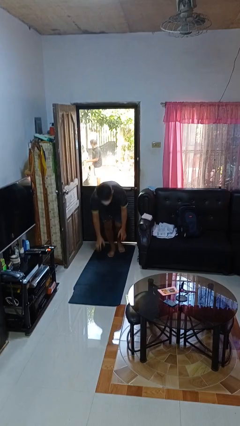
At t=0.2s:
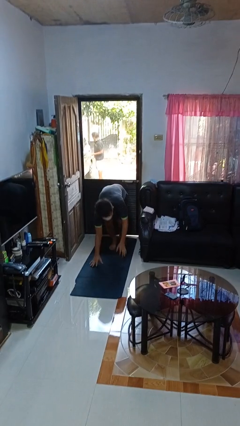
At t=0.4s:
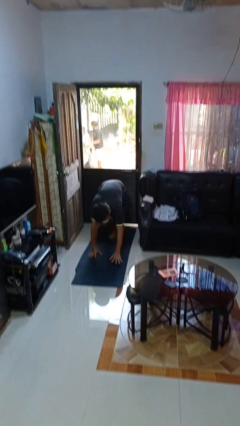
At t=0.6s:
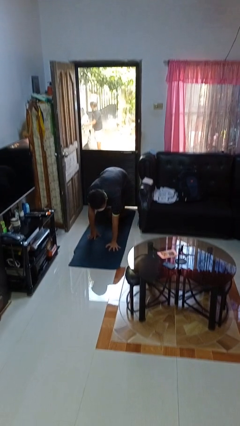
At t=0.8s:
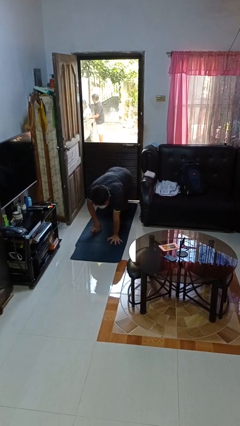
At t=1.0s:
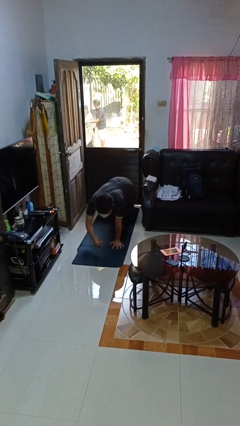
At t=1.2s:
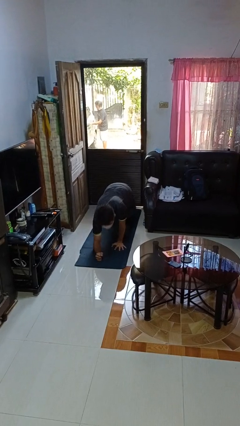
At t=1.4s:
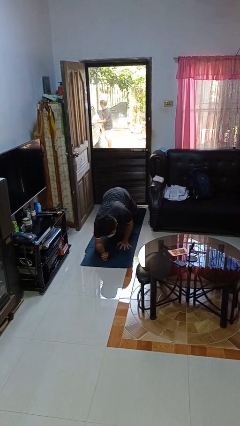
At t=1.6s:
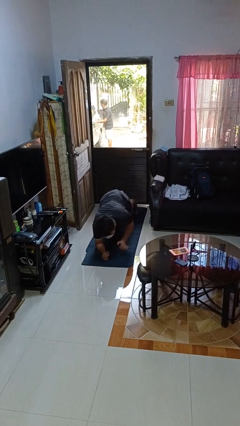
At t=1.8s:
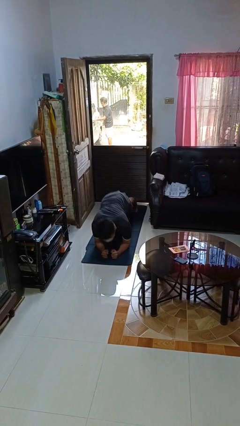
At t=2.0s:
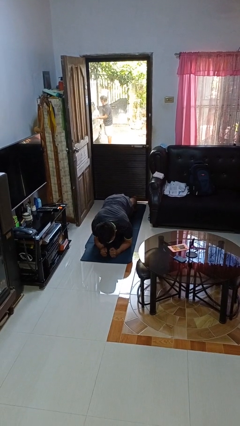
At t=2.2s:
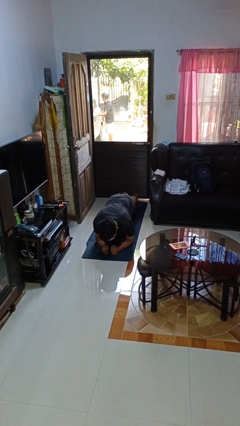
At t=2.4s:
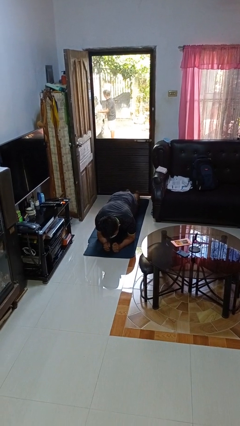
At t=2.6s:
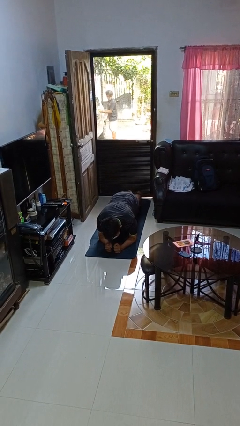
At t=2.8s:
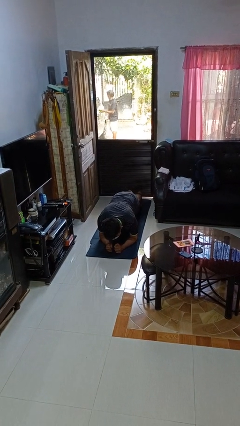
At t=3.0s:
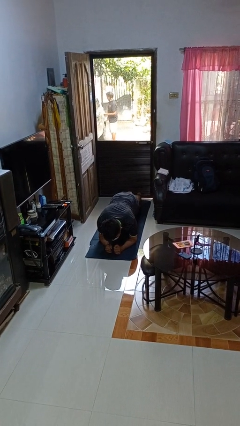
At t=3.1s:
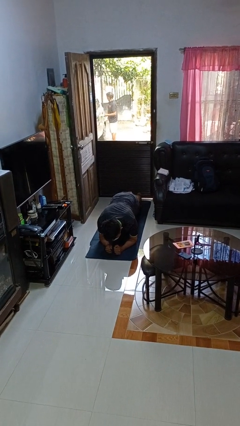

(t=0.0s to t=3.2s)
person exercises with plank

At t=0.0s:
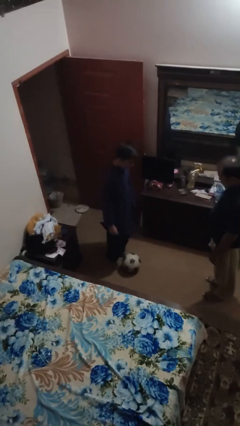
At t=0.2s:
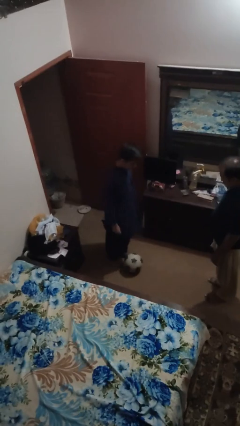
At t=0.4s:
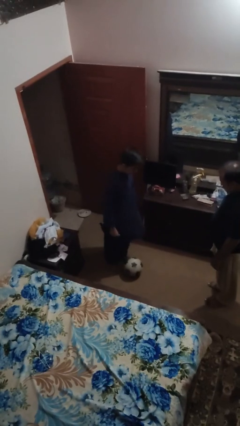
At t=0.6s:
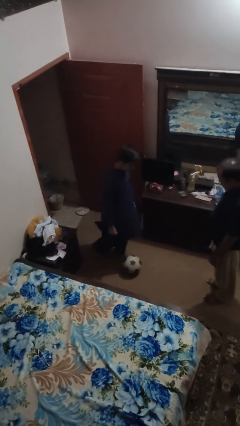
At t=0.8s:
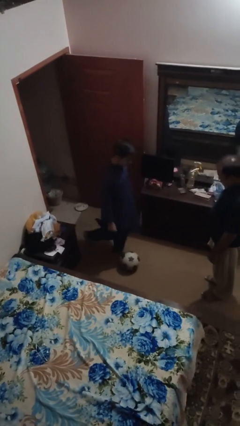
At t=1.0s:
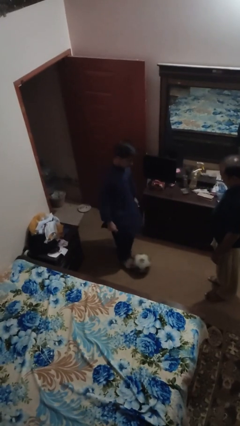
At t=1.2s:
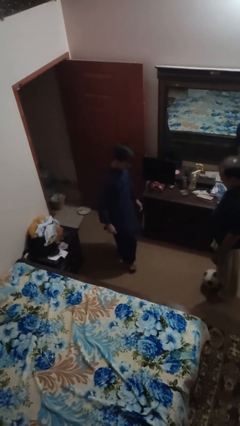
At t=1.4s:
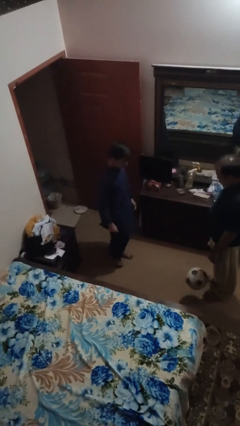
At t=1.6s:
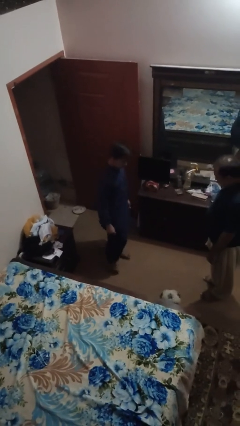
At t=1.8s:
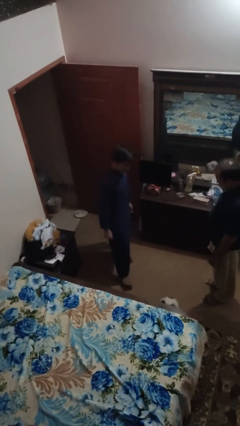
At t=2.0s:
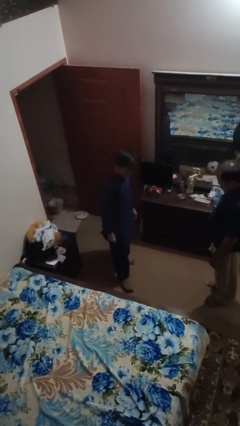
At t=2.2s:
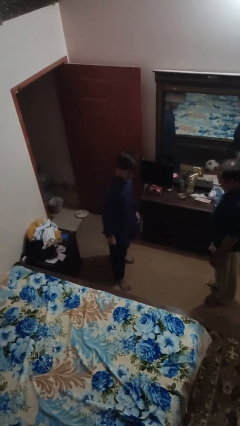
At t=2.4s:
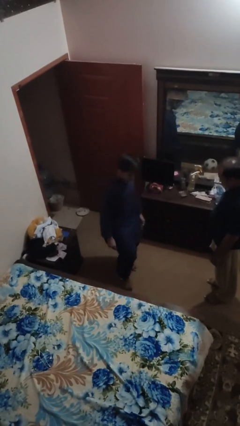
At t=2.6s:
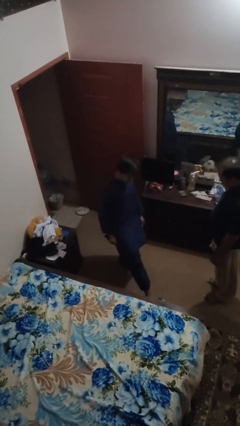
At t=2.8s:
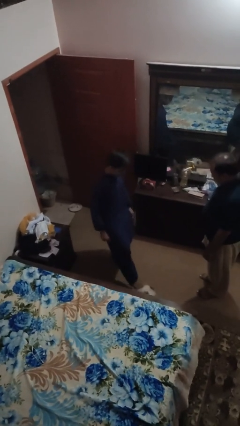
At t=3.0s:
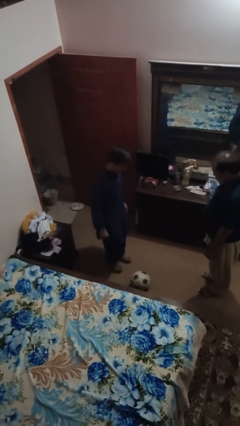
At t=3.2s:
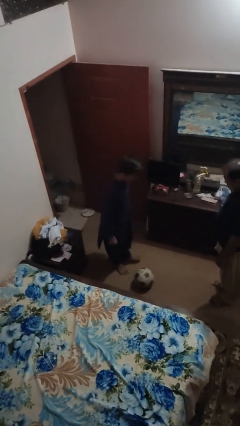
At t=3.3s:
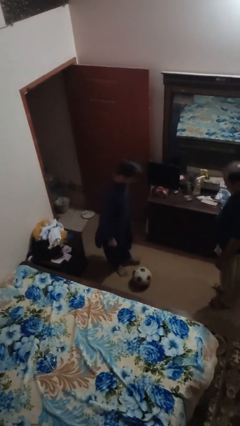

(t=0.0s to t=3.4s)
person kicks object to person

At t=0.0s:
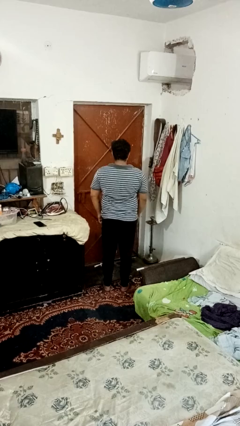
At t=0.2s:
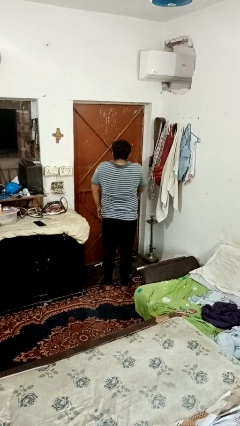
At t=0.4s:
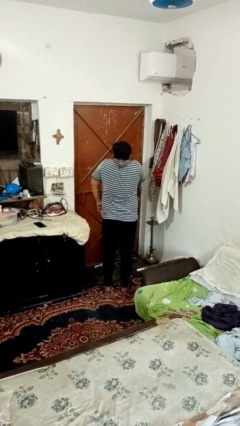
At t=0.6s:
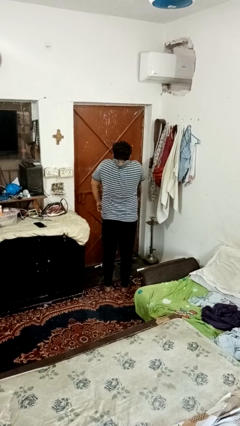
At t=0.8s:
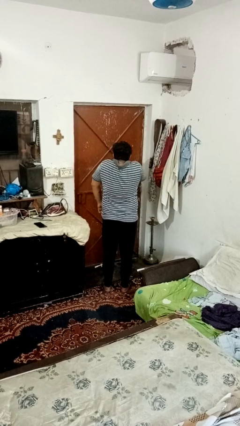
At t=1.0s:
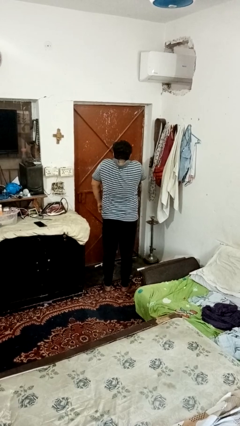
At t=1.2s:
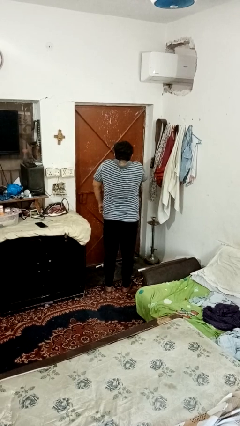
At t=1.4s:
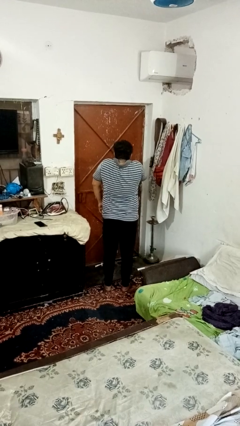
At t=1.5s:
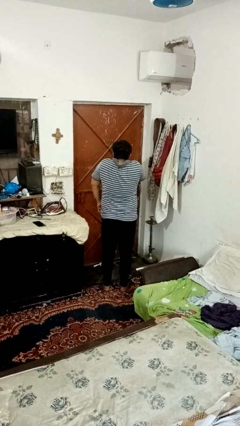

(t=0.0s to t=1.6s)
person shrugs

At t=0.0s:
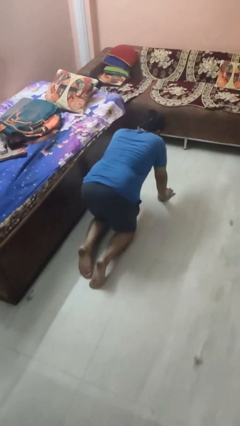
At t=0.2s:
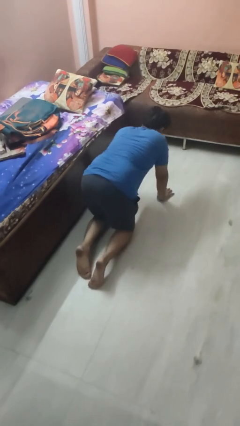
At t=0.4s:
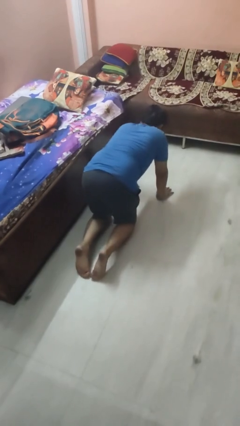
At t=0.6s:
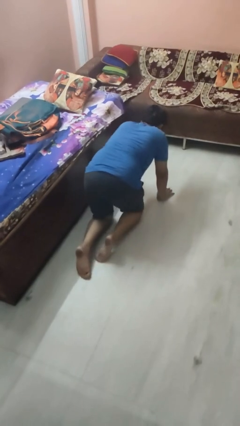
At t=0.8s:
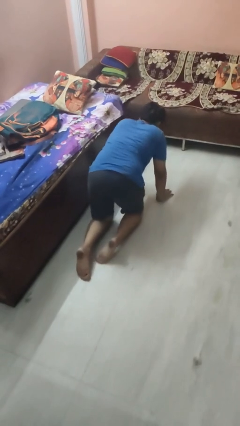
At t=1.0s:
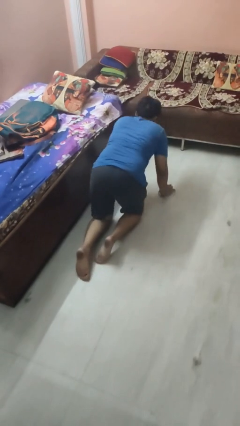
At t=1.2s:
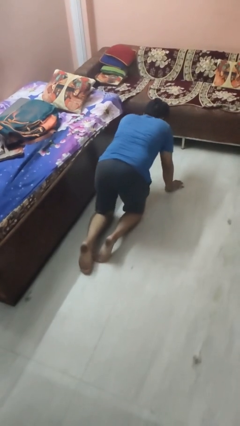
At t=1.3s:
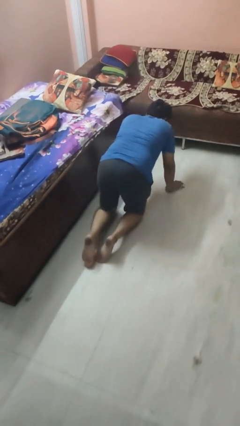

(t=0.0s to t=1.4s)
person crawls

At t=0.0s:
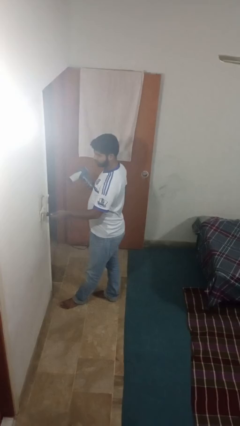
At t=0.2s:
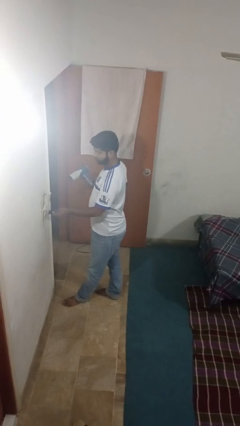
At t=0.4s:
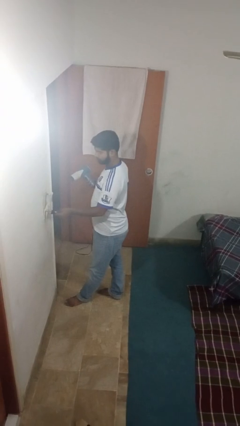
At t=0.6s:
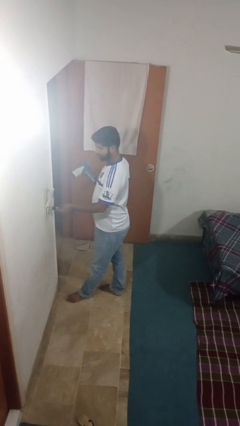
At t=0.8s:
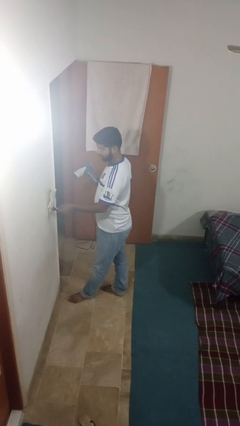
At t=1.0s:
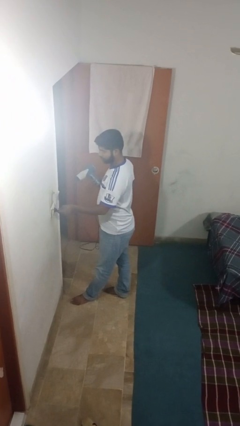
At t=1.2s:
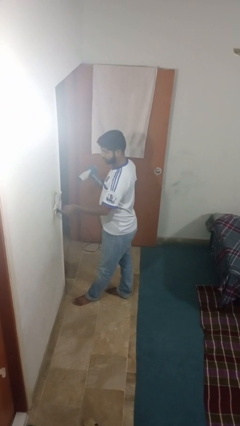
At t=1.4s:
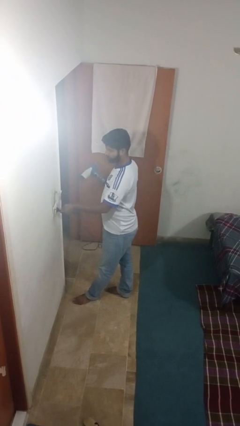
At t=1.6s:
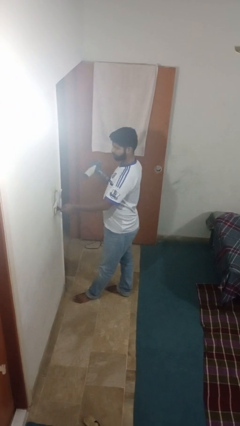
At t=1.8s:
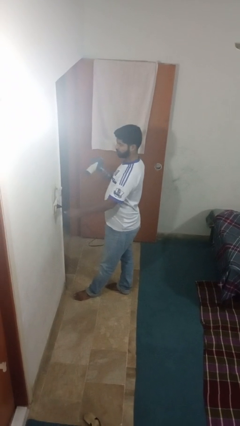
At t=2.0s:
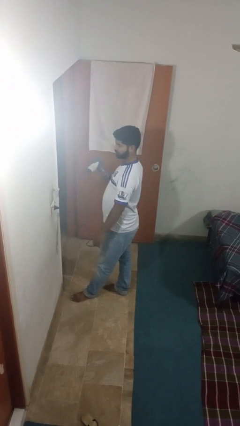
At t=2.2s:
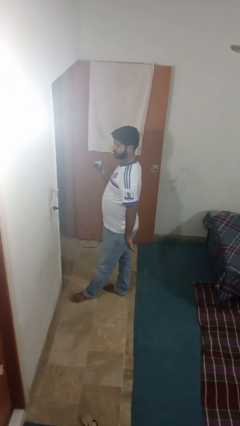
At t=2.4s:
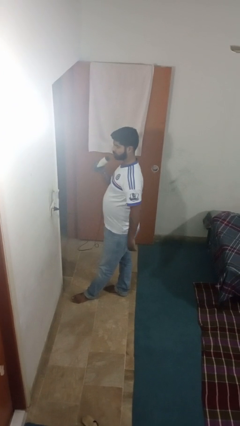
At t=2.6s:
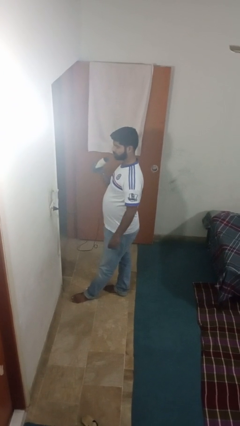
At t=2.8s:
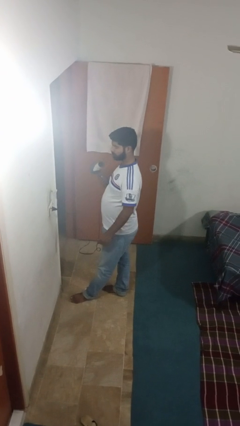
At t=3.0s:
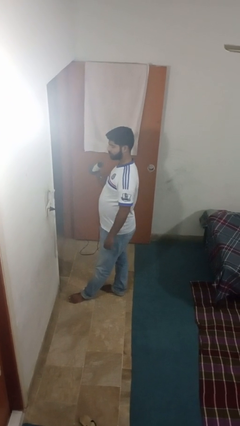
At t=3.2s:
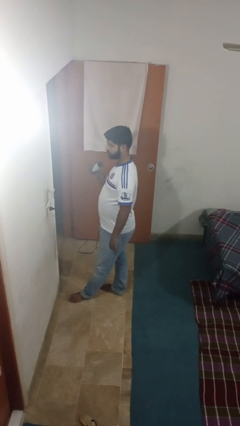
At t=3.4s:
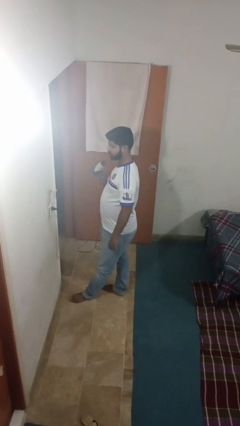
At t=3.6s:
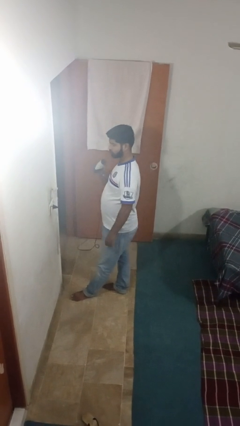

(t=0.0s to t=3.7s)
person plugs into electrical socket

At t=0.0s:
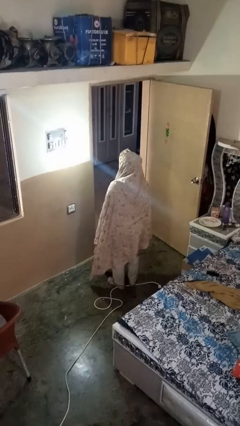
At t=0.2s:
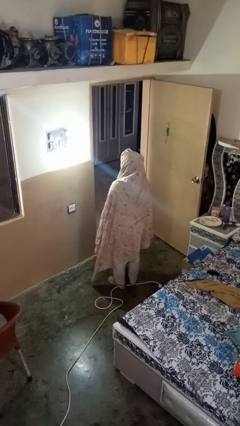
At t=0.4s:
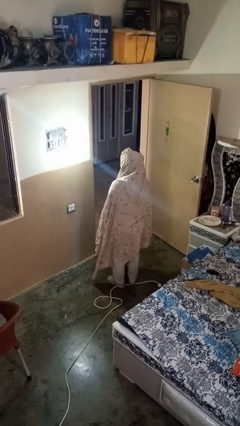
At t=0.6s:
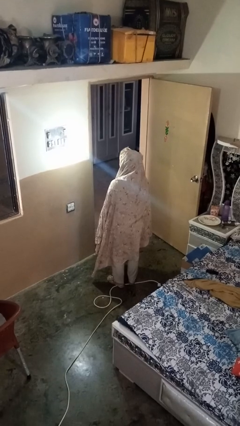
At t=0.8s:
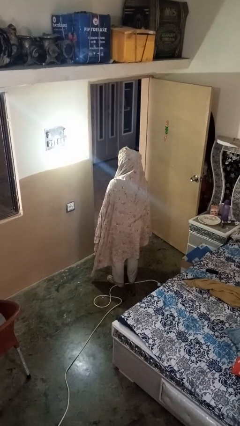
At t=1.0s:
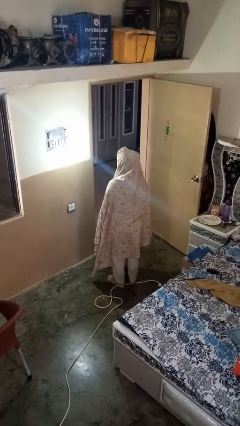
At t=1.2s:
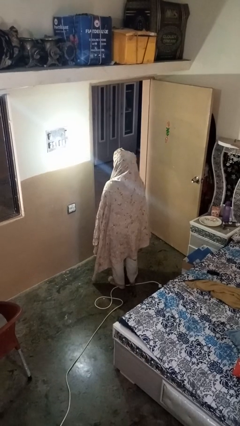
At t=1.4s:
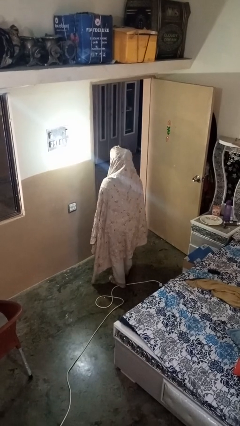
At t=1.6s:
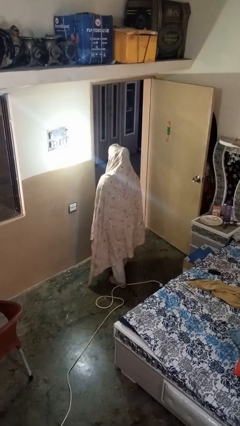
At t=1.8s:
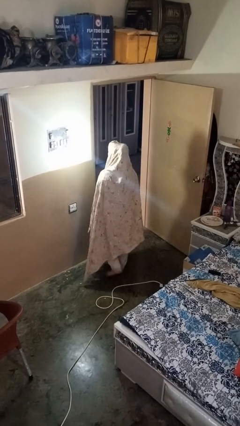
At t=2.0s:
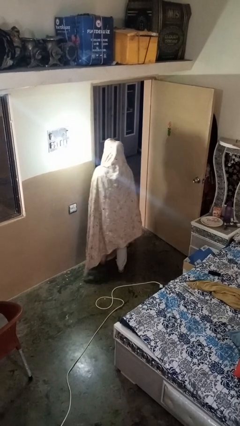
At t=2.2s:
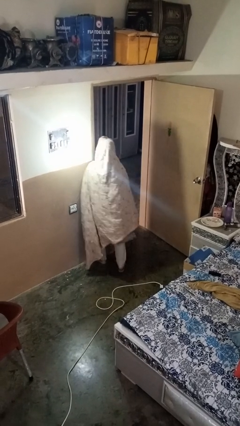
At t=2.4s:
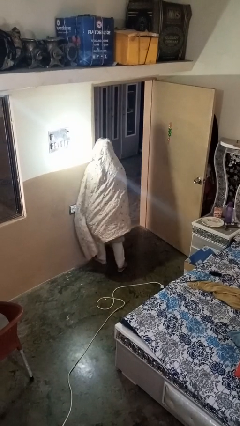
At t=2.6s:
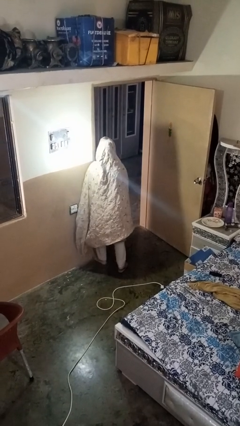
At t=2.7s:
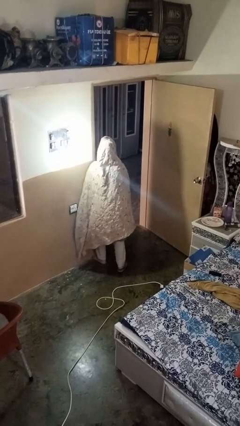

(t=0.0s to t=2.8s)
person bumps into wall

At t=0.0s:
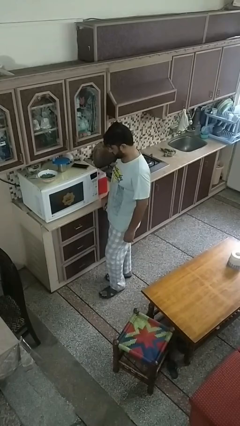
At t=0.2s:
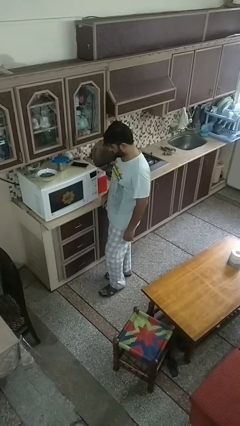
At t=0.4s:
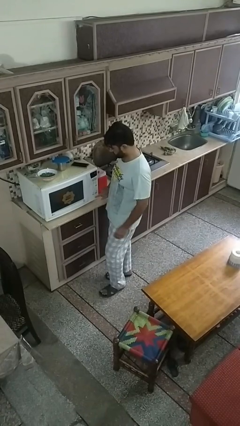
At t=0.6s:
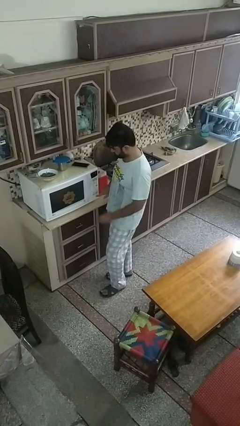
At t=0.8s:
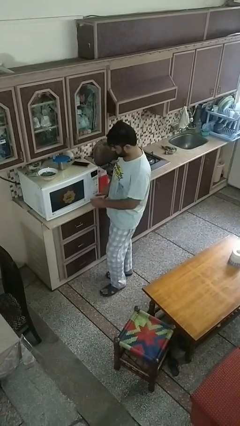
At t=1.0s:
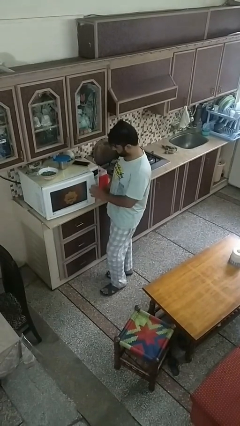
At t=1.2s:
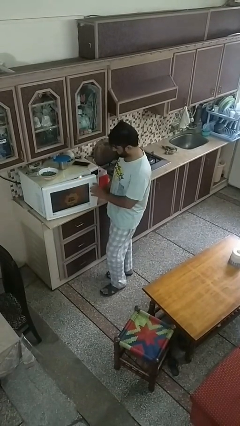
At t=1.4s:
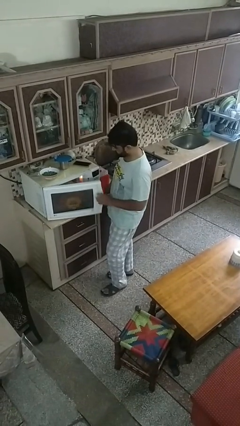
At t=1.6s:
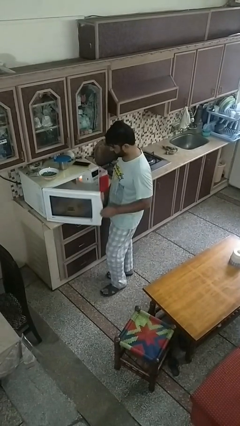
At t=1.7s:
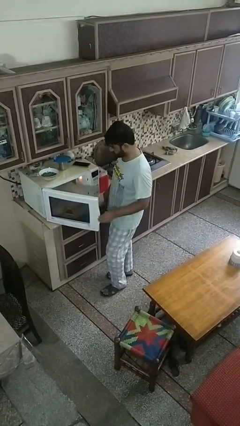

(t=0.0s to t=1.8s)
person opens oven door
